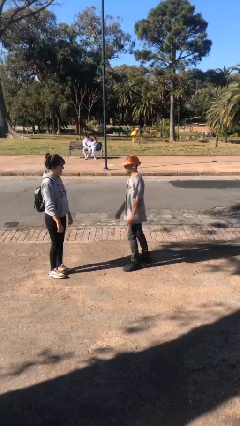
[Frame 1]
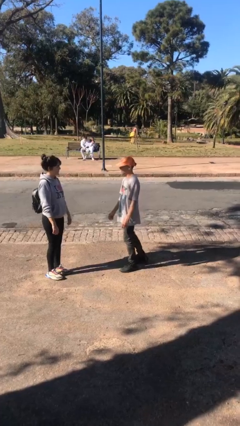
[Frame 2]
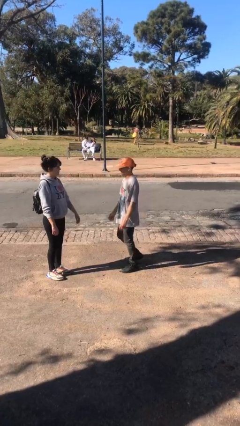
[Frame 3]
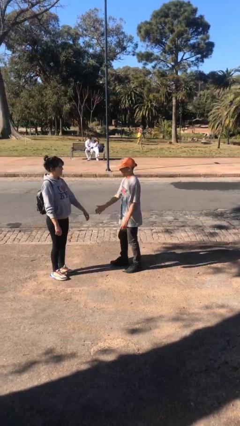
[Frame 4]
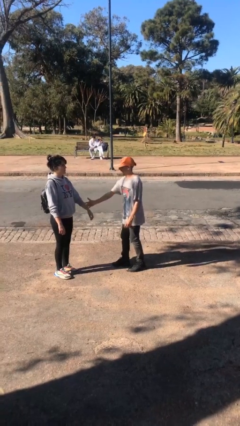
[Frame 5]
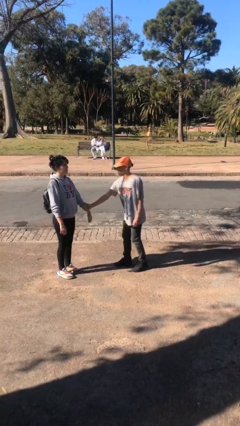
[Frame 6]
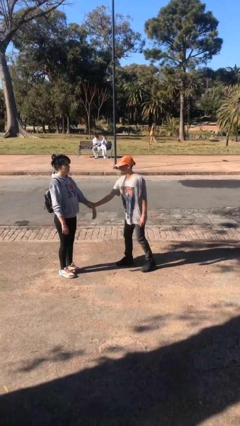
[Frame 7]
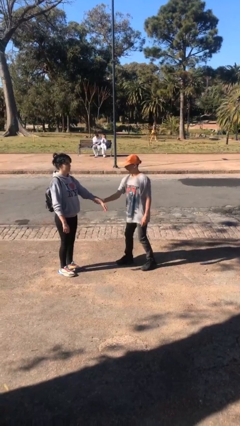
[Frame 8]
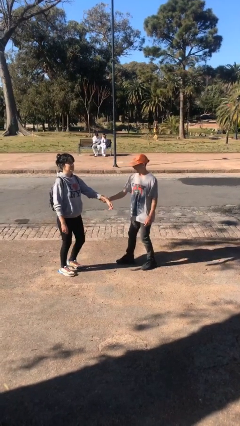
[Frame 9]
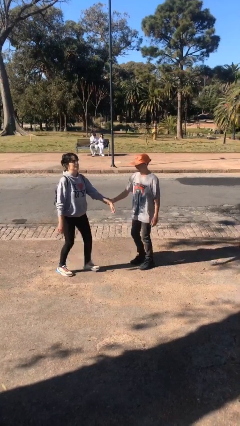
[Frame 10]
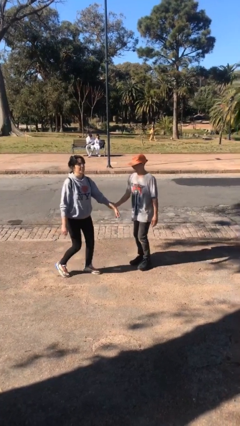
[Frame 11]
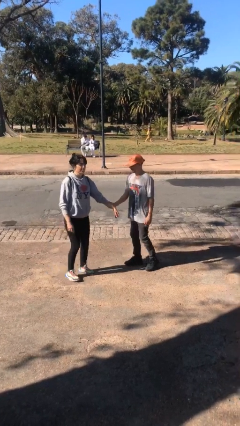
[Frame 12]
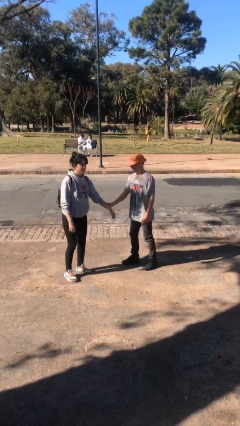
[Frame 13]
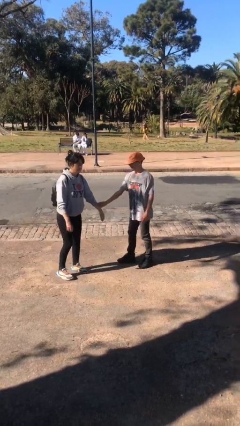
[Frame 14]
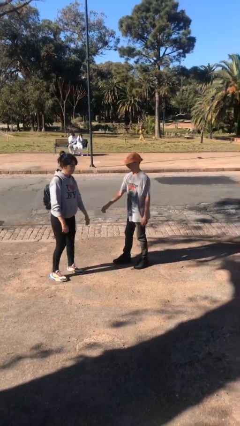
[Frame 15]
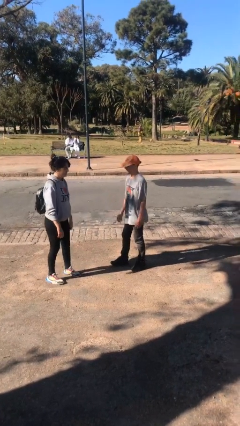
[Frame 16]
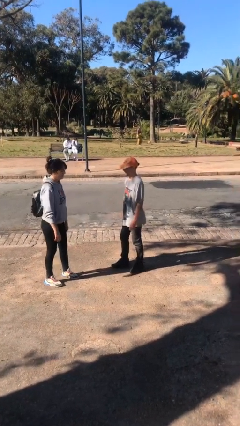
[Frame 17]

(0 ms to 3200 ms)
person grabs person by forearm

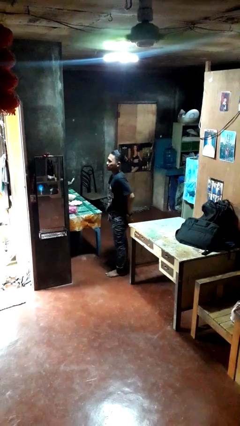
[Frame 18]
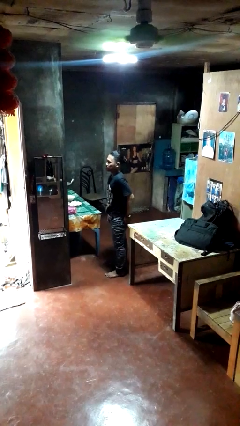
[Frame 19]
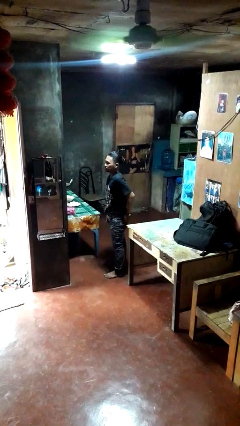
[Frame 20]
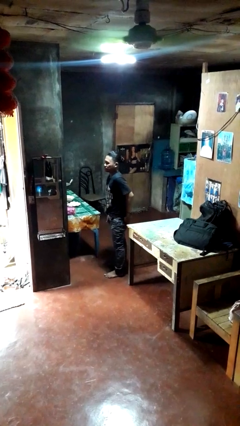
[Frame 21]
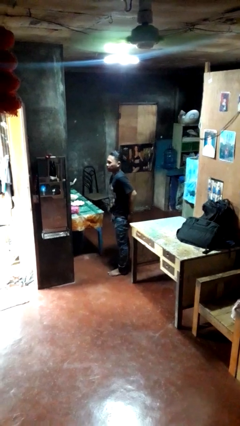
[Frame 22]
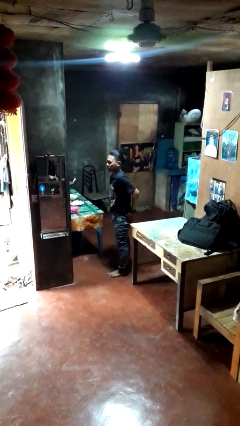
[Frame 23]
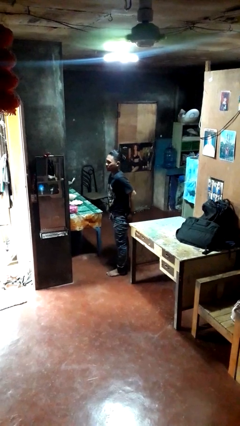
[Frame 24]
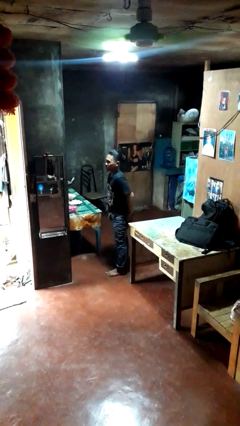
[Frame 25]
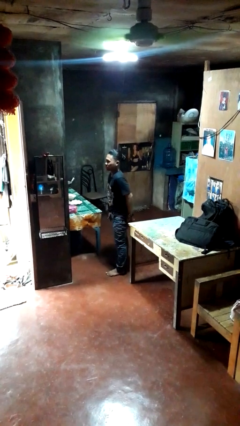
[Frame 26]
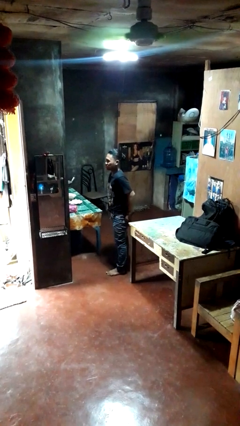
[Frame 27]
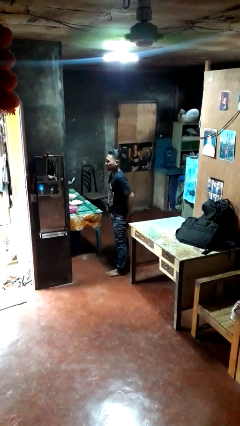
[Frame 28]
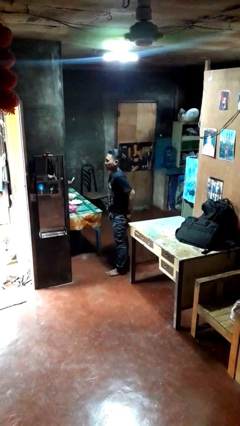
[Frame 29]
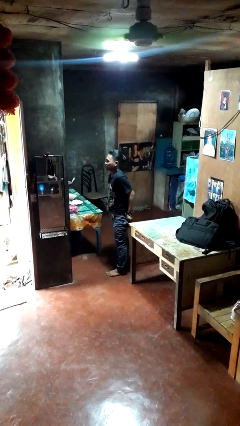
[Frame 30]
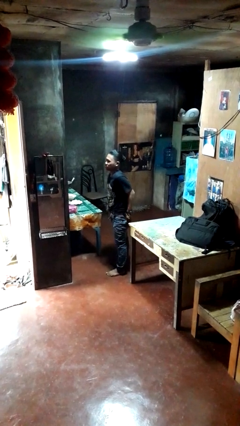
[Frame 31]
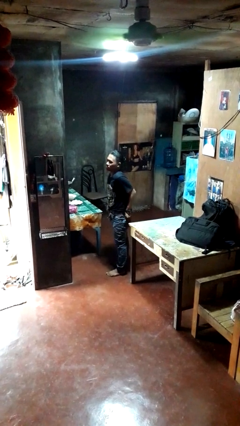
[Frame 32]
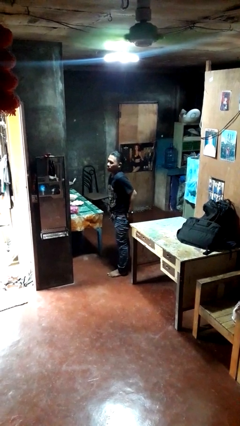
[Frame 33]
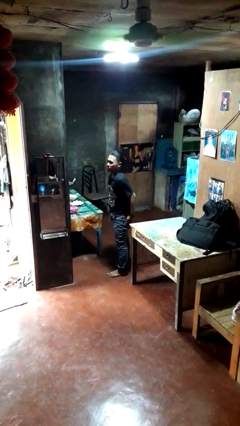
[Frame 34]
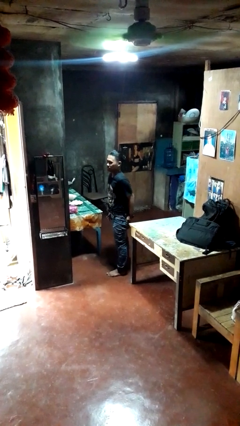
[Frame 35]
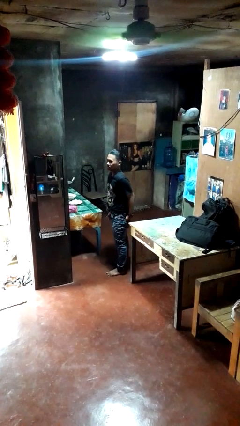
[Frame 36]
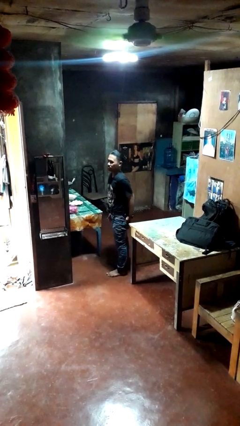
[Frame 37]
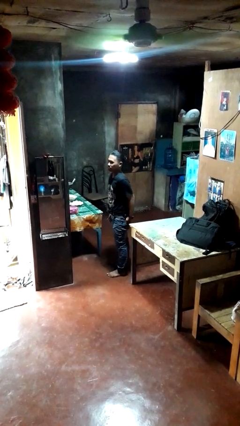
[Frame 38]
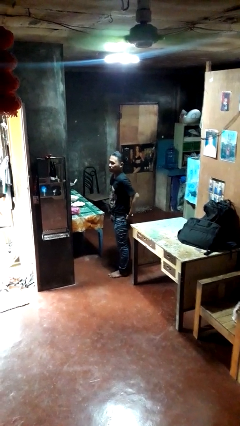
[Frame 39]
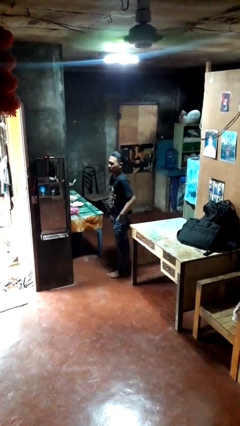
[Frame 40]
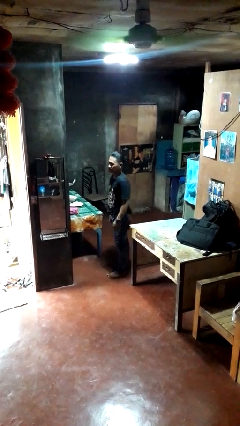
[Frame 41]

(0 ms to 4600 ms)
person puts hands in back pockets

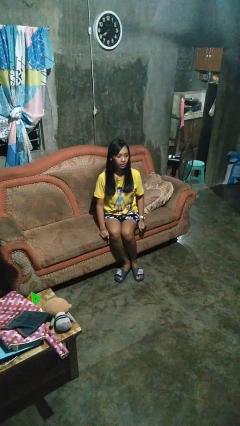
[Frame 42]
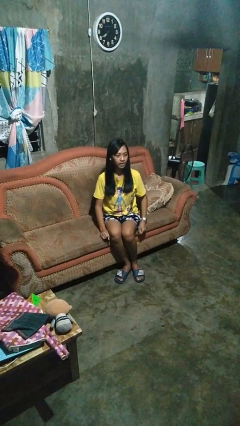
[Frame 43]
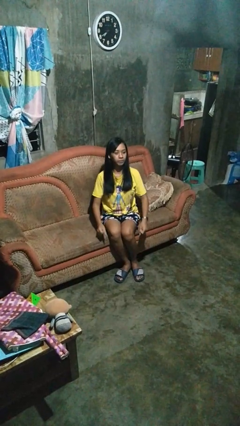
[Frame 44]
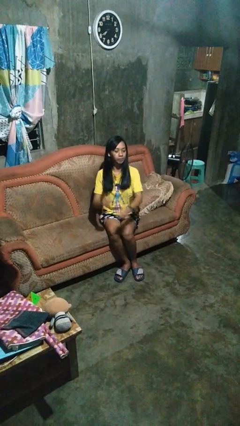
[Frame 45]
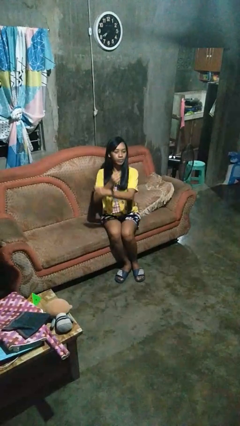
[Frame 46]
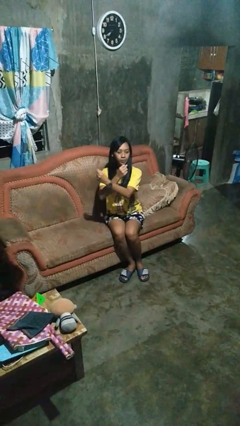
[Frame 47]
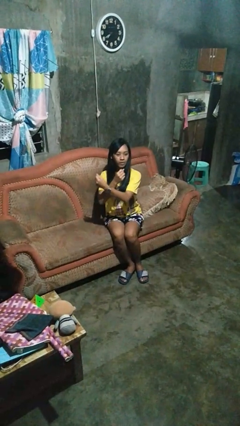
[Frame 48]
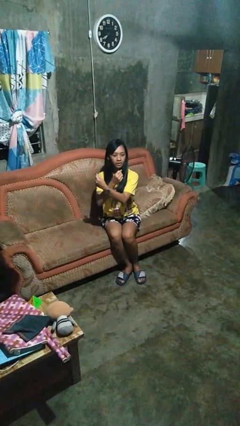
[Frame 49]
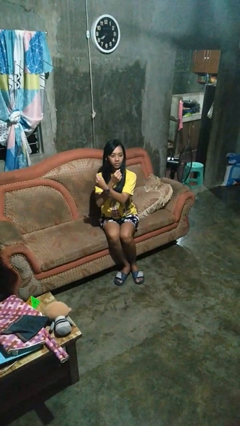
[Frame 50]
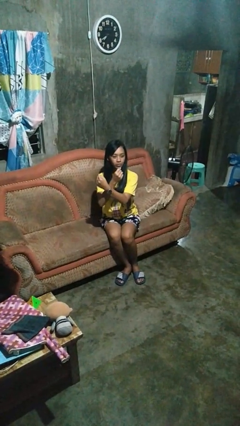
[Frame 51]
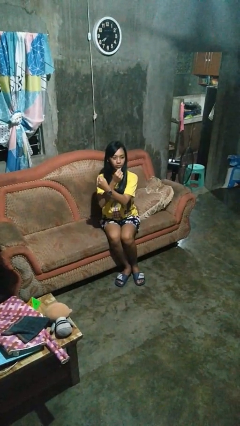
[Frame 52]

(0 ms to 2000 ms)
person gestures arms x

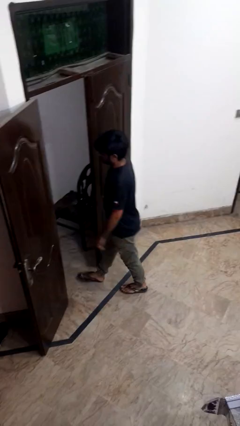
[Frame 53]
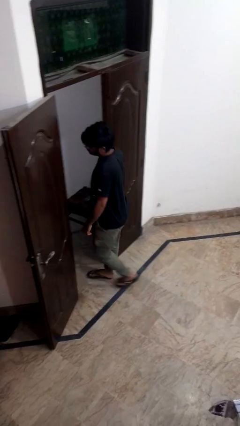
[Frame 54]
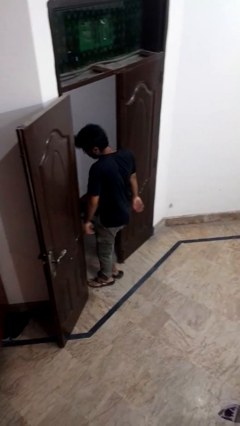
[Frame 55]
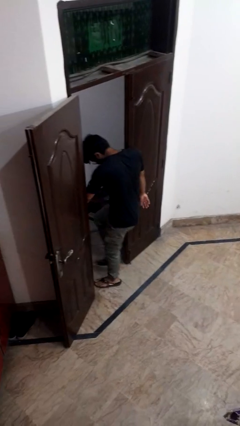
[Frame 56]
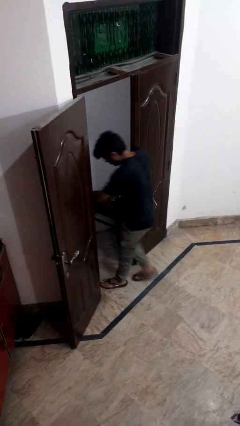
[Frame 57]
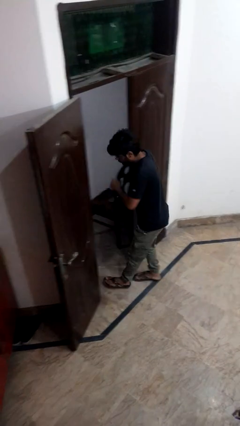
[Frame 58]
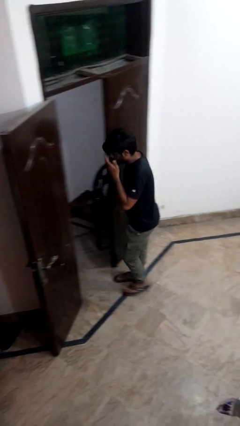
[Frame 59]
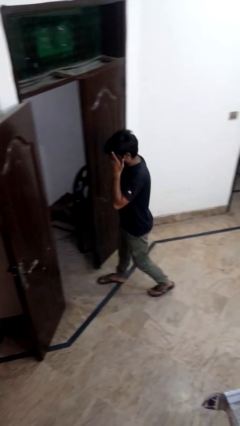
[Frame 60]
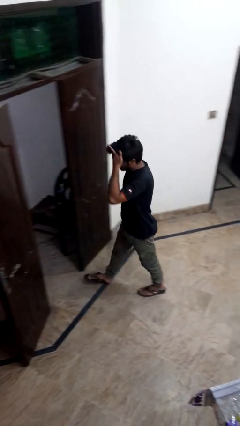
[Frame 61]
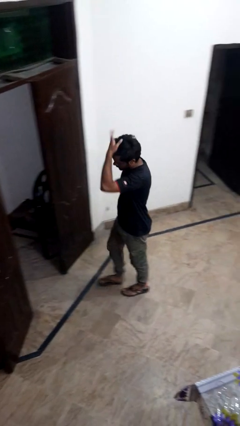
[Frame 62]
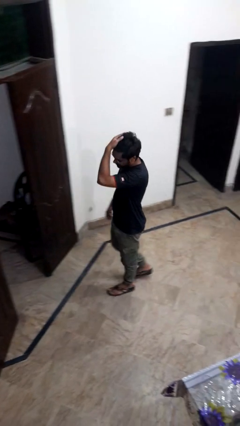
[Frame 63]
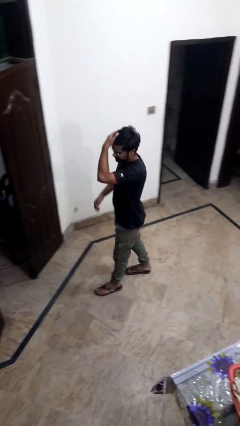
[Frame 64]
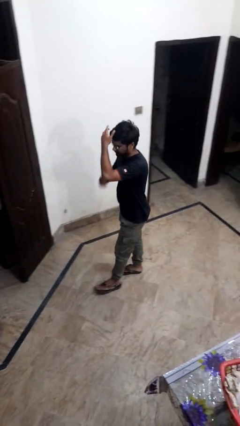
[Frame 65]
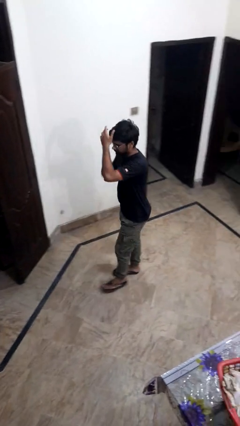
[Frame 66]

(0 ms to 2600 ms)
person bumps into wall

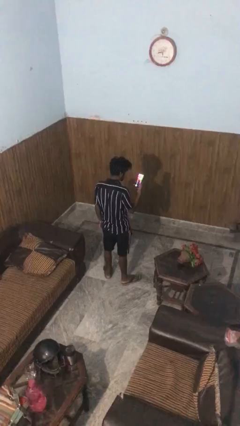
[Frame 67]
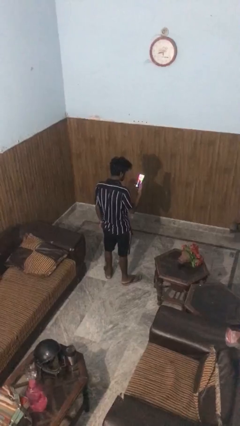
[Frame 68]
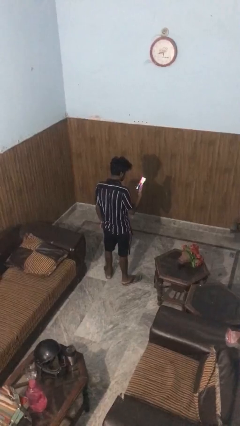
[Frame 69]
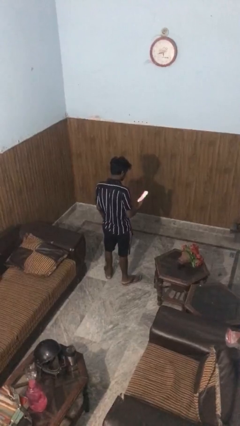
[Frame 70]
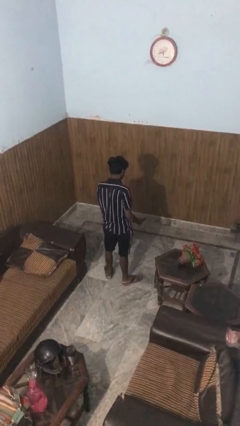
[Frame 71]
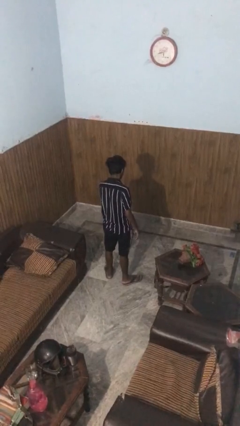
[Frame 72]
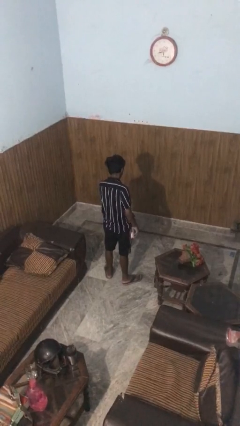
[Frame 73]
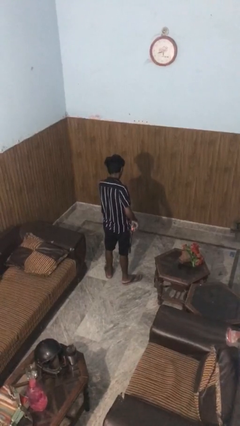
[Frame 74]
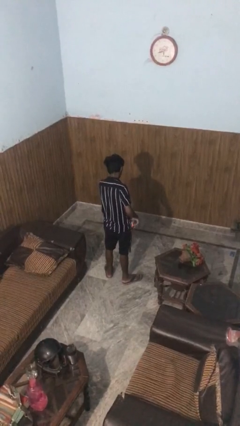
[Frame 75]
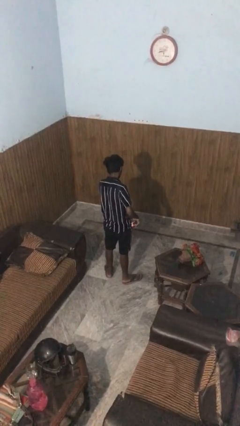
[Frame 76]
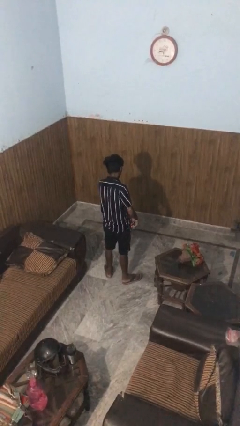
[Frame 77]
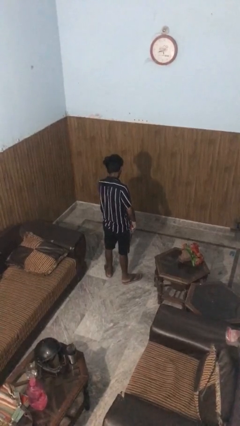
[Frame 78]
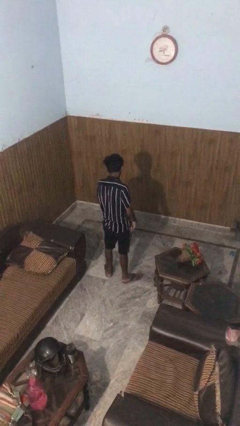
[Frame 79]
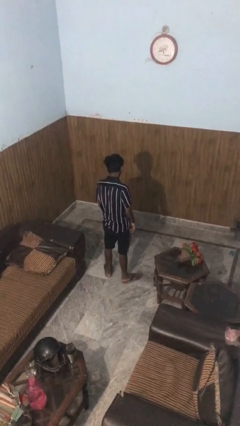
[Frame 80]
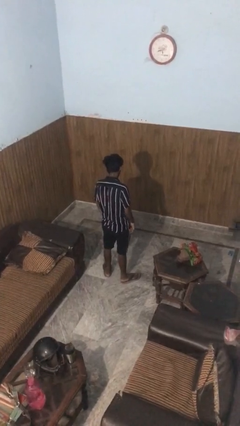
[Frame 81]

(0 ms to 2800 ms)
person puts phone into pocket

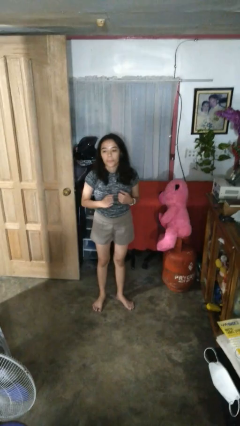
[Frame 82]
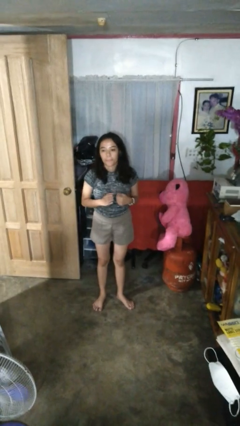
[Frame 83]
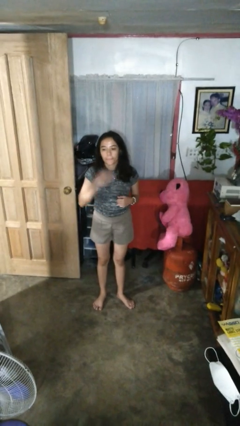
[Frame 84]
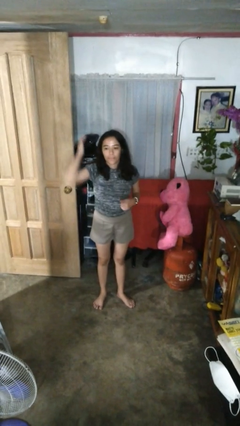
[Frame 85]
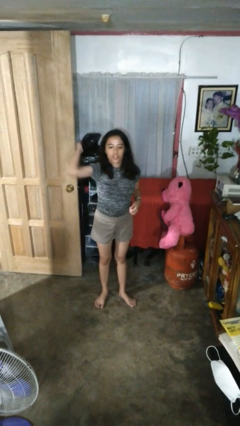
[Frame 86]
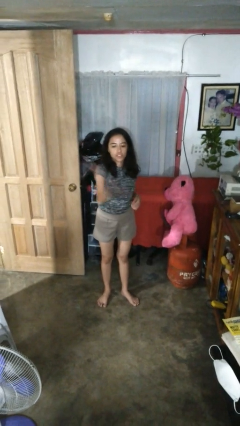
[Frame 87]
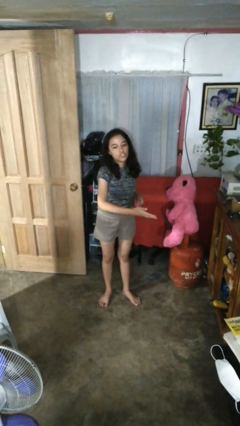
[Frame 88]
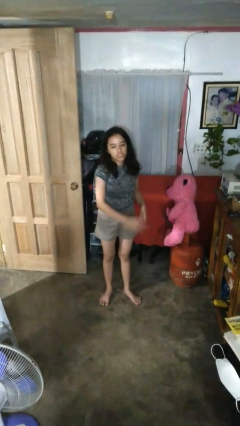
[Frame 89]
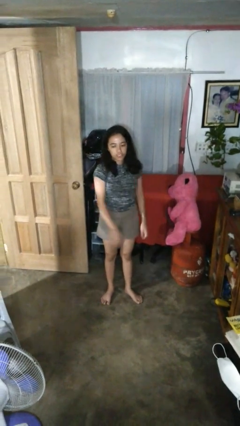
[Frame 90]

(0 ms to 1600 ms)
person karate chop
